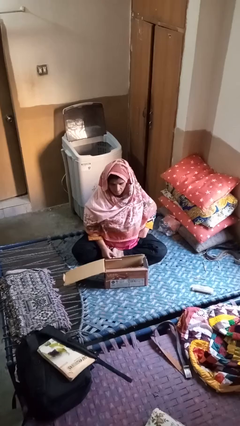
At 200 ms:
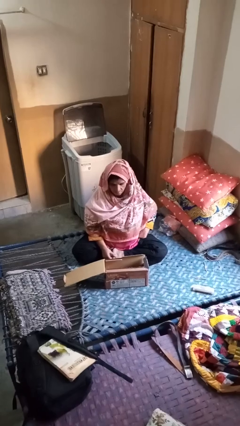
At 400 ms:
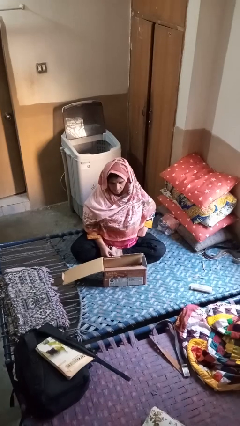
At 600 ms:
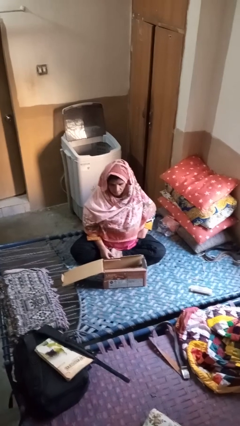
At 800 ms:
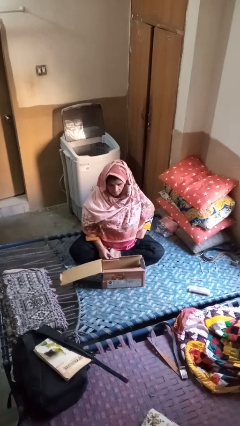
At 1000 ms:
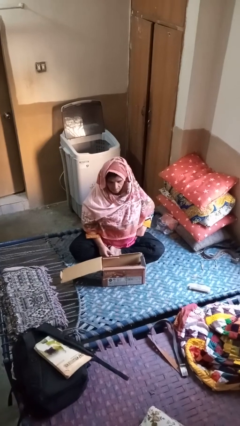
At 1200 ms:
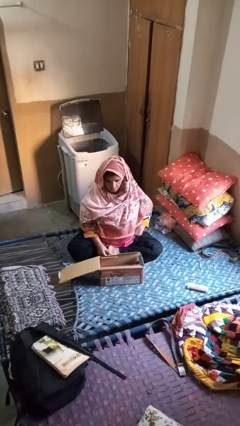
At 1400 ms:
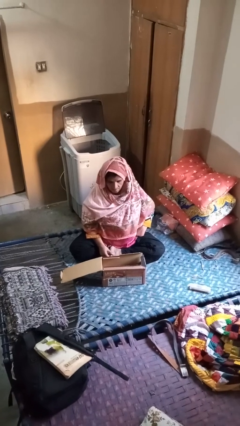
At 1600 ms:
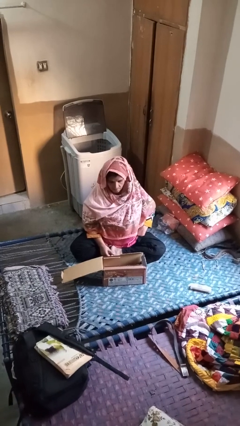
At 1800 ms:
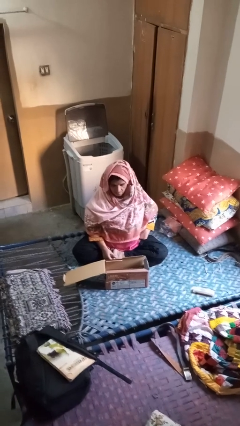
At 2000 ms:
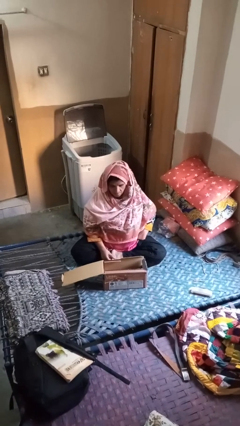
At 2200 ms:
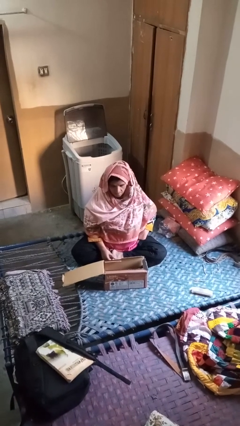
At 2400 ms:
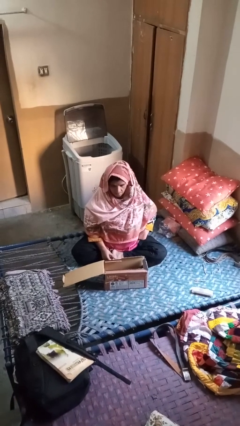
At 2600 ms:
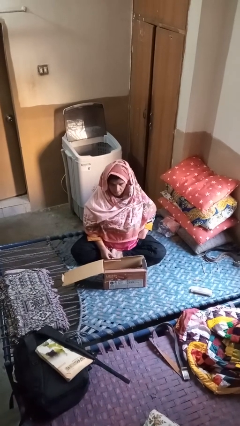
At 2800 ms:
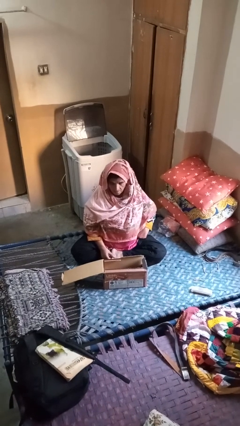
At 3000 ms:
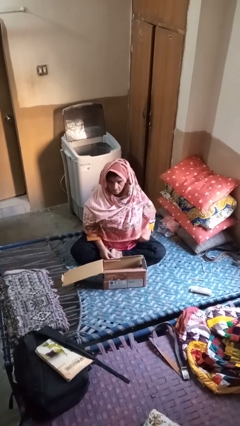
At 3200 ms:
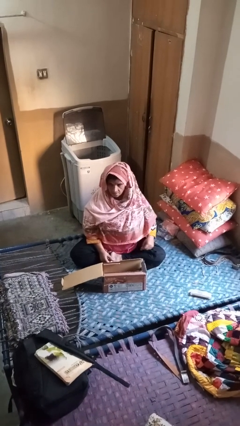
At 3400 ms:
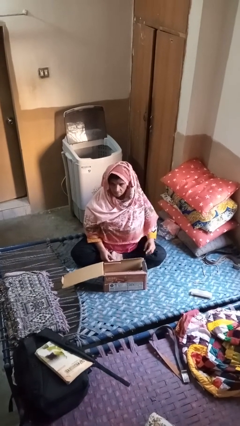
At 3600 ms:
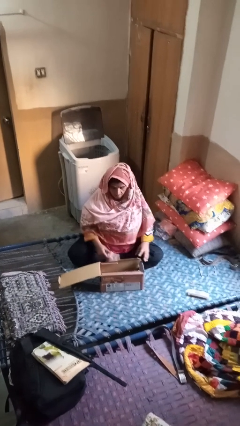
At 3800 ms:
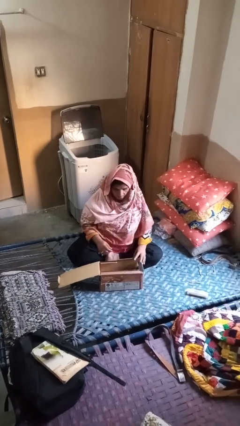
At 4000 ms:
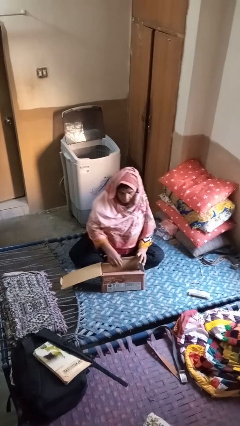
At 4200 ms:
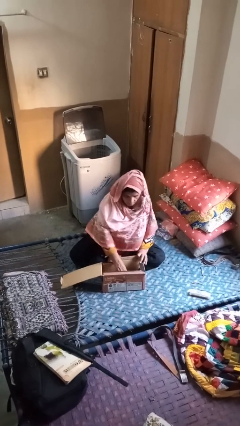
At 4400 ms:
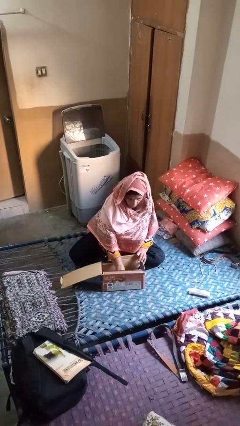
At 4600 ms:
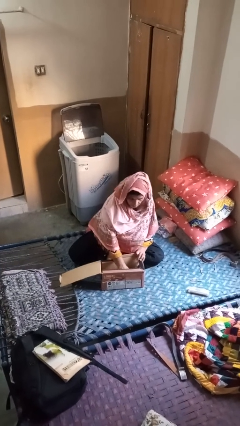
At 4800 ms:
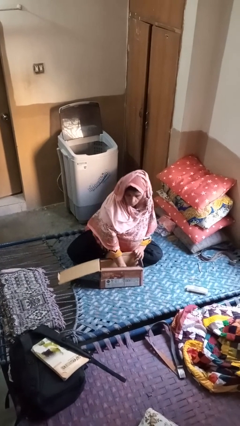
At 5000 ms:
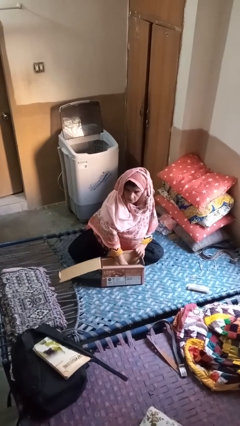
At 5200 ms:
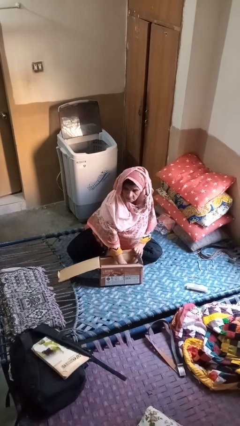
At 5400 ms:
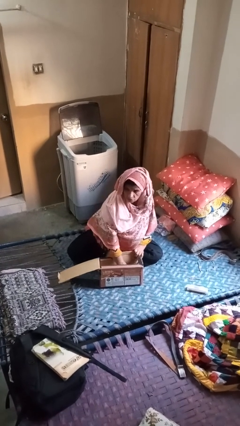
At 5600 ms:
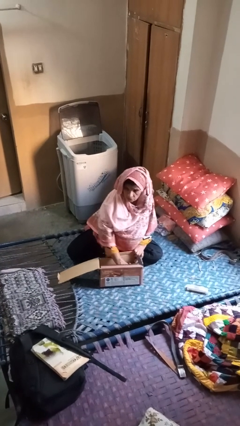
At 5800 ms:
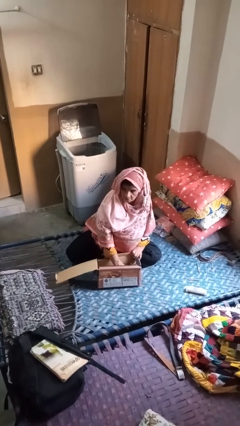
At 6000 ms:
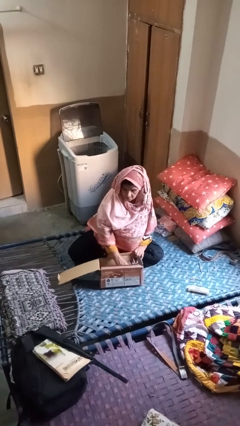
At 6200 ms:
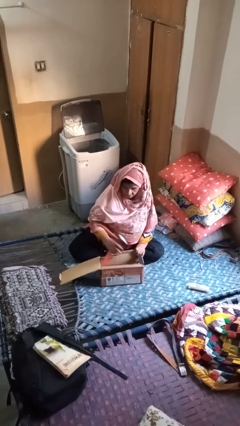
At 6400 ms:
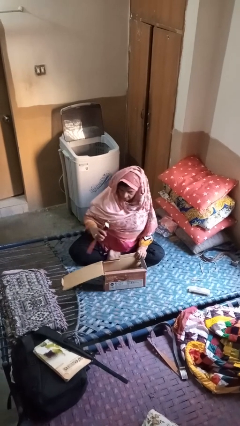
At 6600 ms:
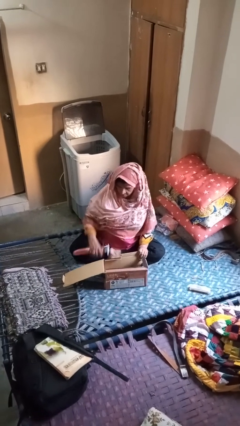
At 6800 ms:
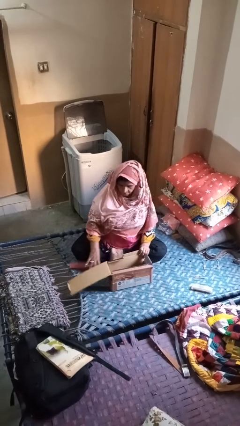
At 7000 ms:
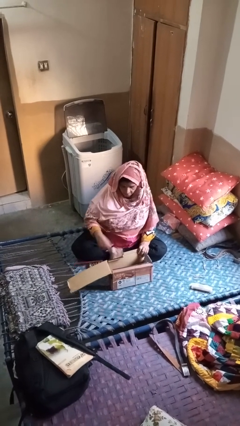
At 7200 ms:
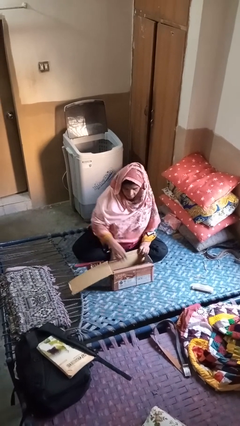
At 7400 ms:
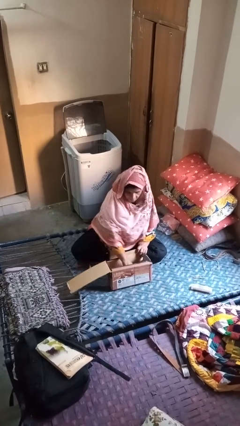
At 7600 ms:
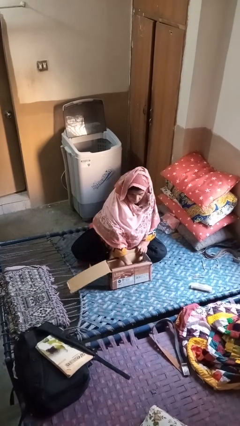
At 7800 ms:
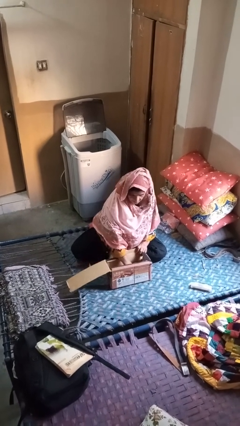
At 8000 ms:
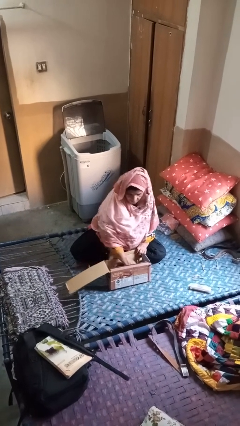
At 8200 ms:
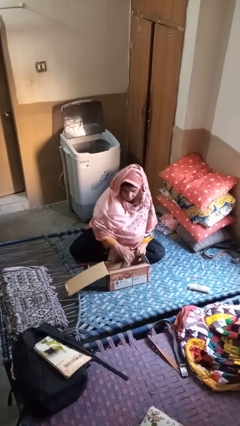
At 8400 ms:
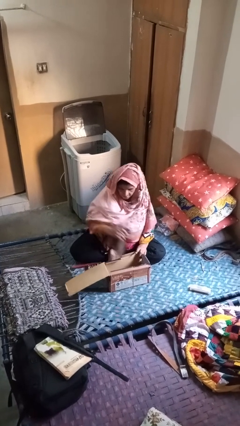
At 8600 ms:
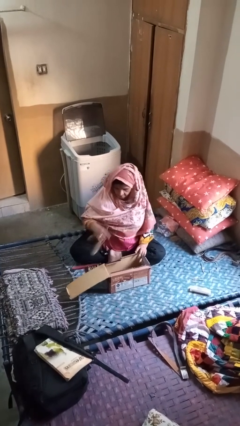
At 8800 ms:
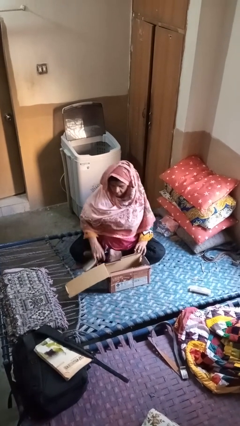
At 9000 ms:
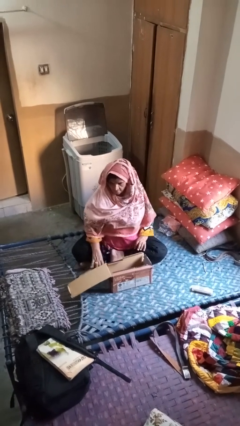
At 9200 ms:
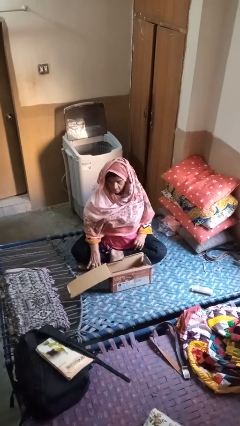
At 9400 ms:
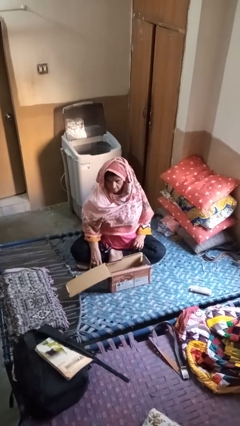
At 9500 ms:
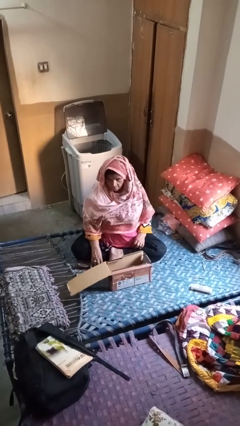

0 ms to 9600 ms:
person takes object from box

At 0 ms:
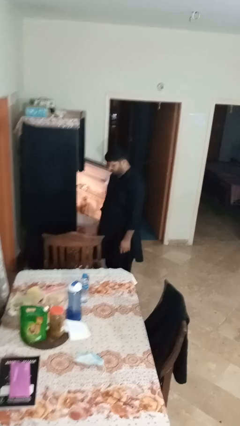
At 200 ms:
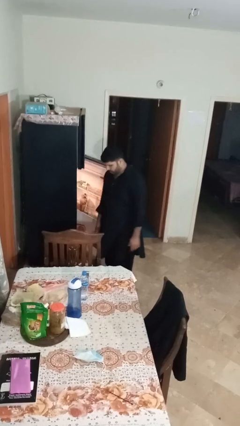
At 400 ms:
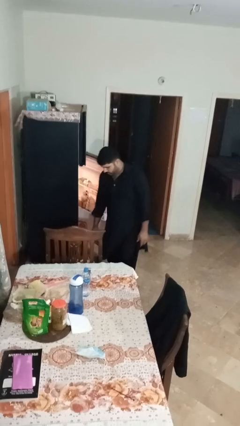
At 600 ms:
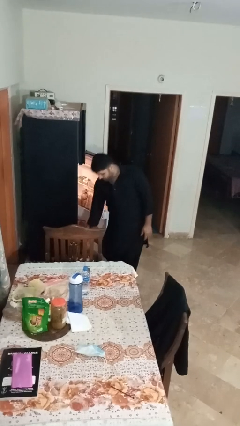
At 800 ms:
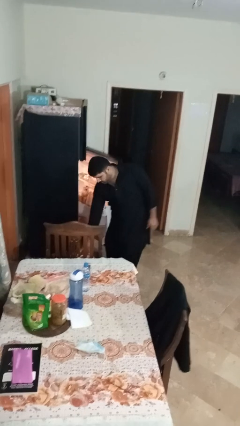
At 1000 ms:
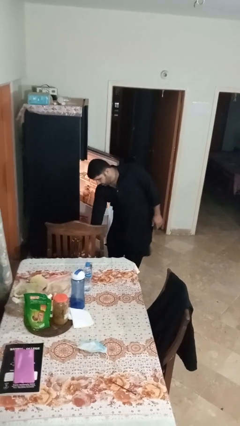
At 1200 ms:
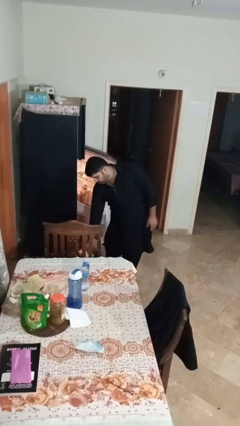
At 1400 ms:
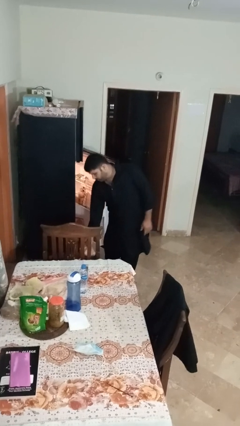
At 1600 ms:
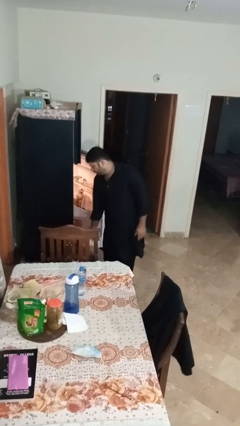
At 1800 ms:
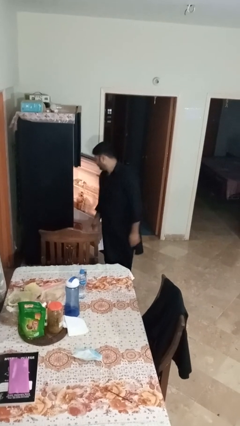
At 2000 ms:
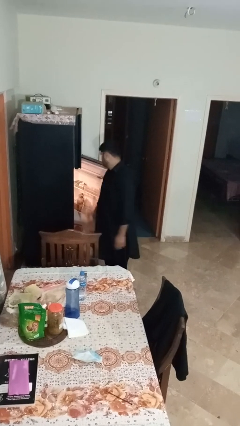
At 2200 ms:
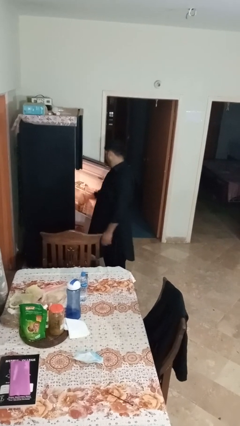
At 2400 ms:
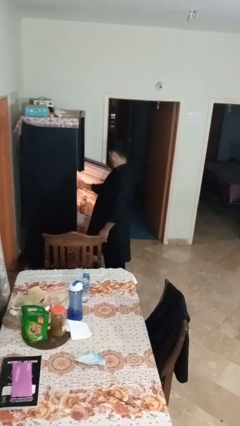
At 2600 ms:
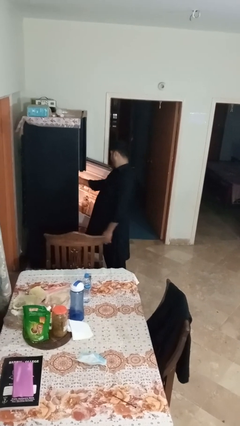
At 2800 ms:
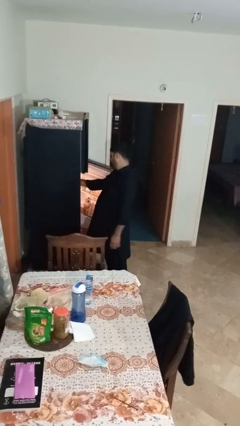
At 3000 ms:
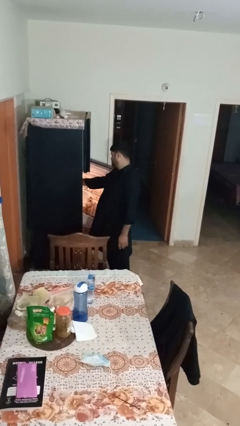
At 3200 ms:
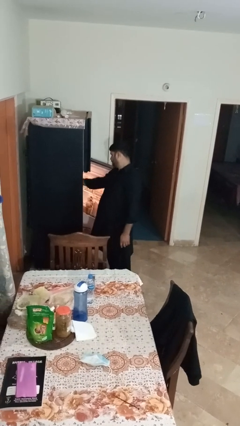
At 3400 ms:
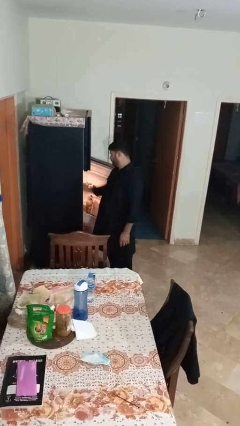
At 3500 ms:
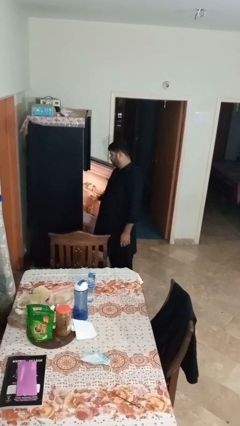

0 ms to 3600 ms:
person loads groceries into refrigerator

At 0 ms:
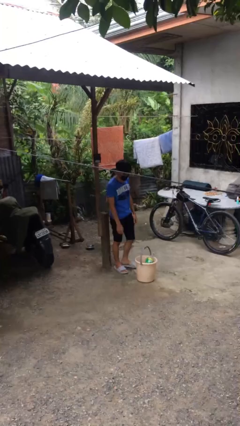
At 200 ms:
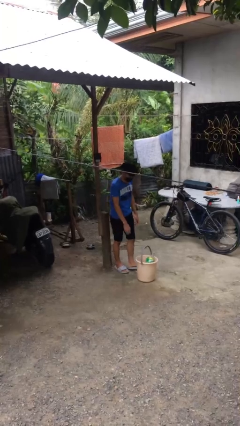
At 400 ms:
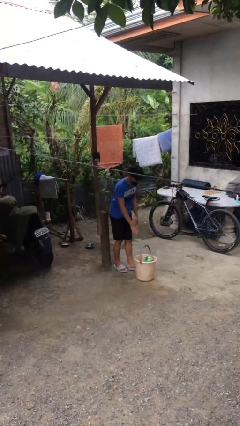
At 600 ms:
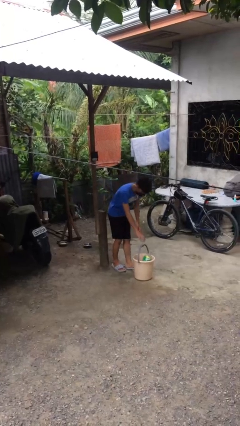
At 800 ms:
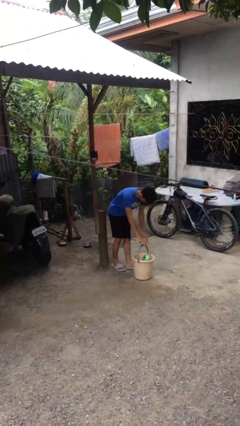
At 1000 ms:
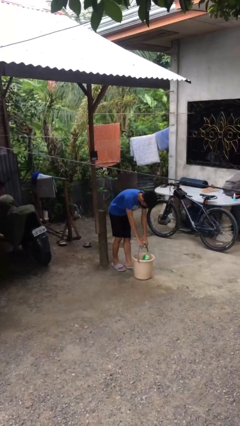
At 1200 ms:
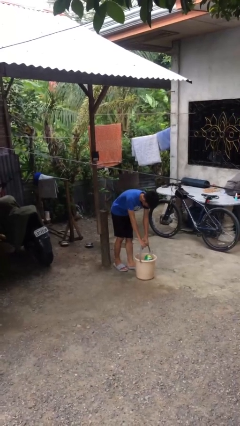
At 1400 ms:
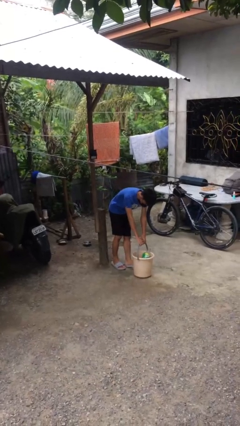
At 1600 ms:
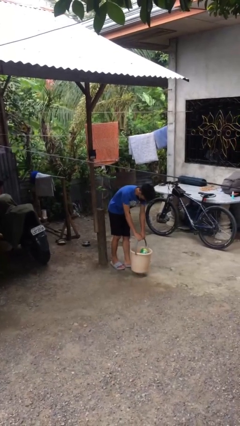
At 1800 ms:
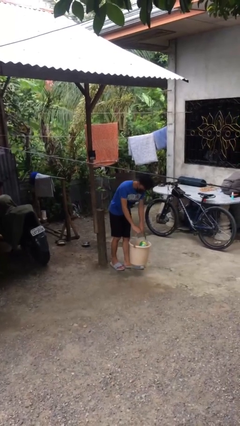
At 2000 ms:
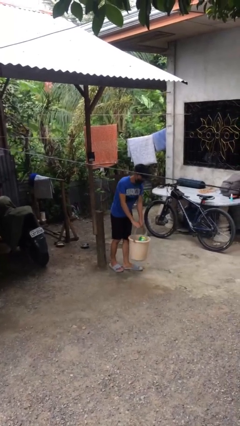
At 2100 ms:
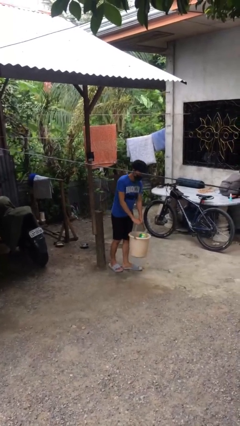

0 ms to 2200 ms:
person picks up object from floor

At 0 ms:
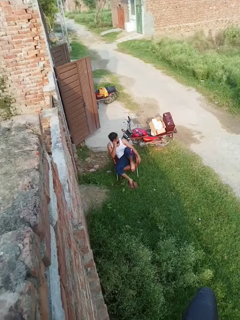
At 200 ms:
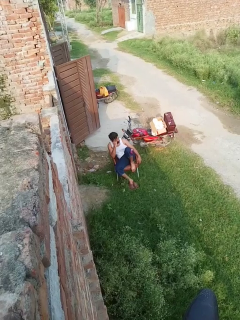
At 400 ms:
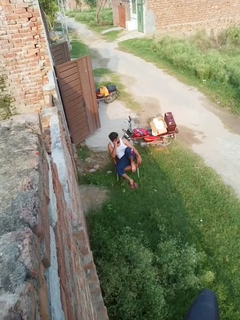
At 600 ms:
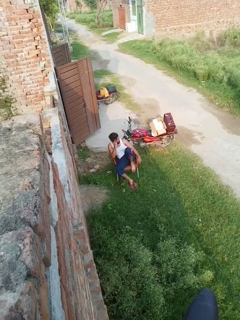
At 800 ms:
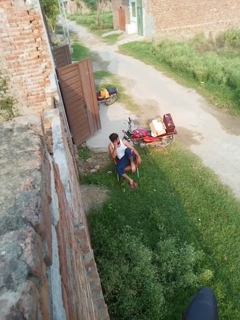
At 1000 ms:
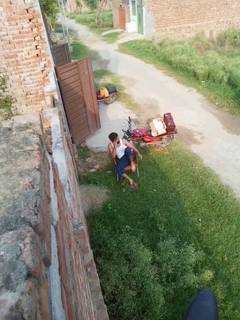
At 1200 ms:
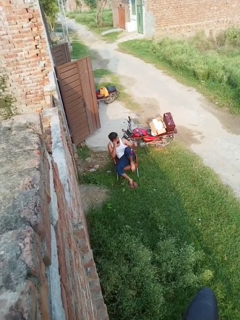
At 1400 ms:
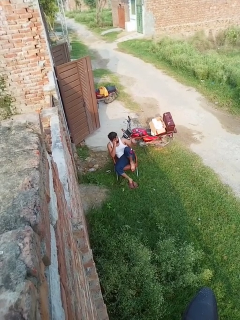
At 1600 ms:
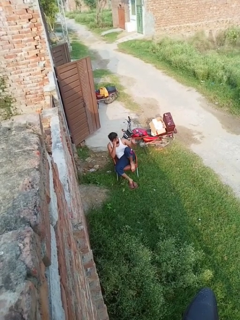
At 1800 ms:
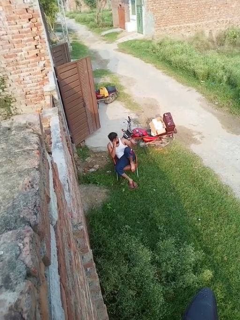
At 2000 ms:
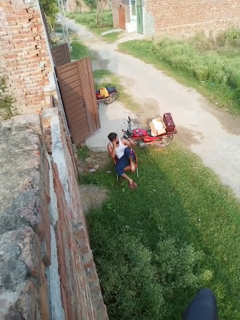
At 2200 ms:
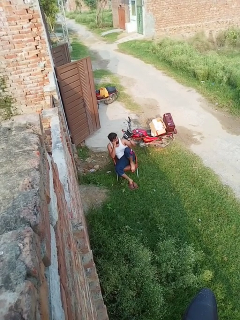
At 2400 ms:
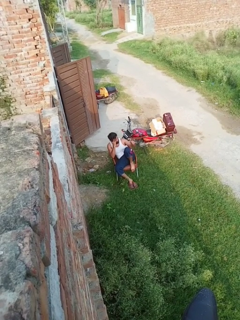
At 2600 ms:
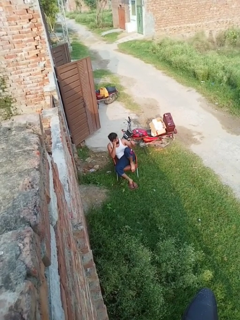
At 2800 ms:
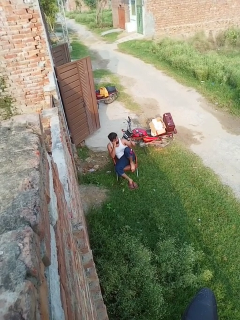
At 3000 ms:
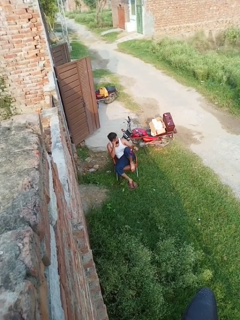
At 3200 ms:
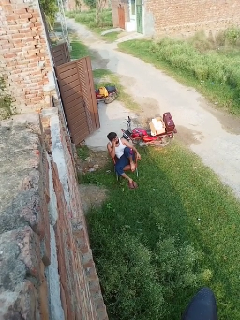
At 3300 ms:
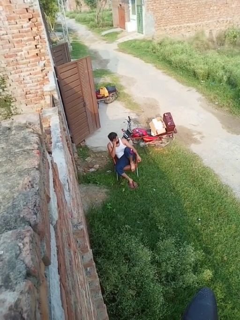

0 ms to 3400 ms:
person gestures thumbs up
